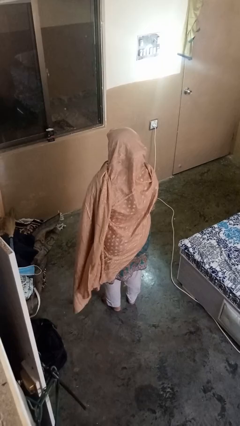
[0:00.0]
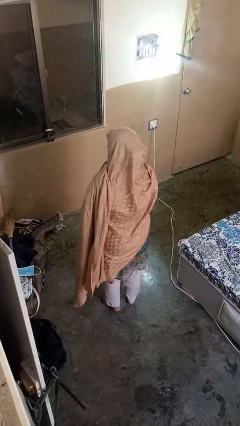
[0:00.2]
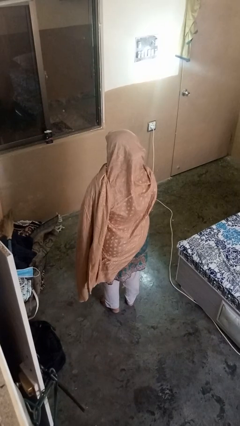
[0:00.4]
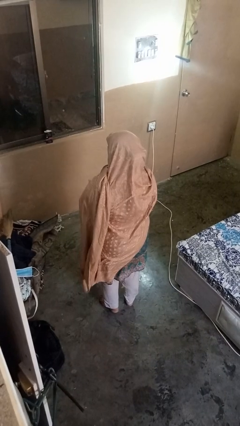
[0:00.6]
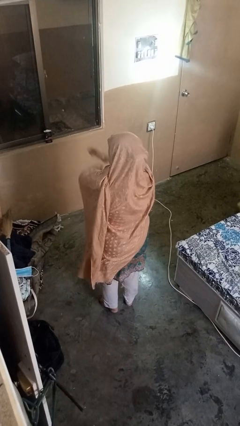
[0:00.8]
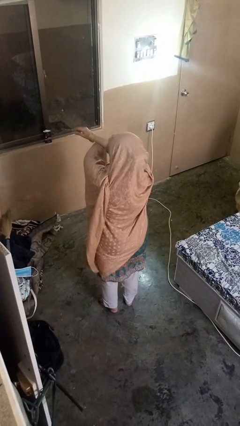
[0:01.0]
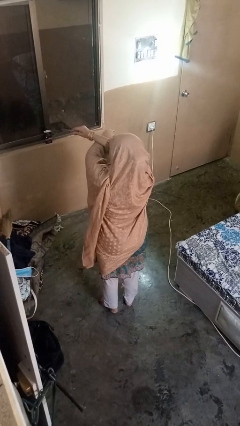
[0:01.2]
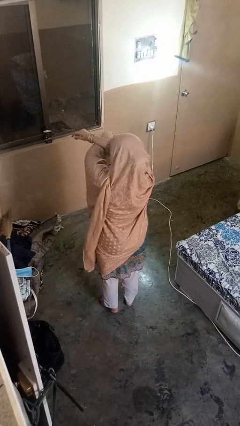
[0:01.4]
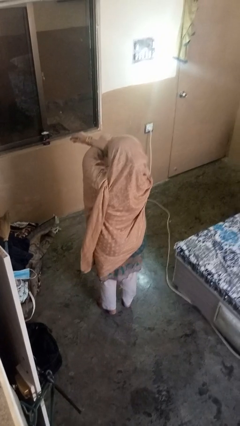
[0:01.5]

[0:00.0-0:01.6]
person crosses arms

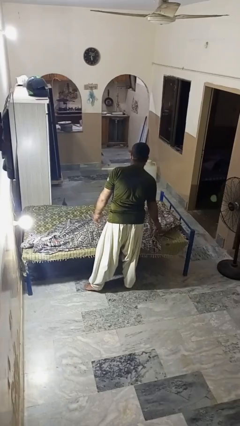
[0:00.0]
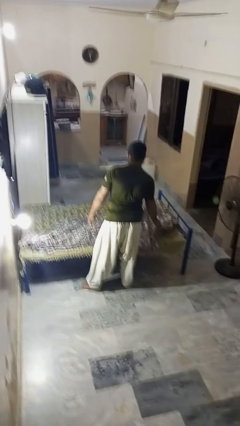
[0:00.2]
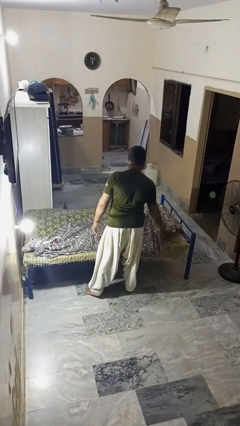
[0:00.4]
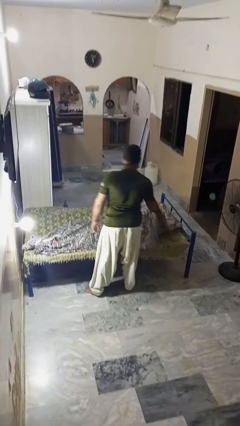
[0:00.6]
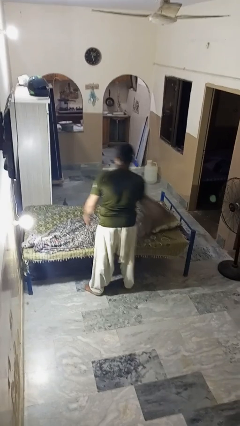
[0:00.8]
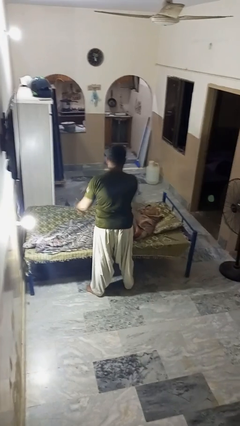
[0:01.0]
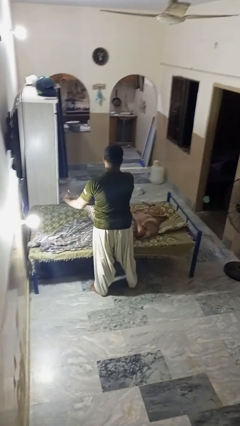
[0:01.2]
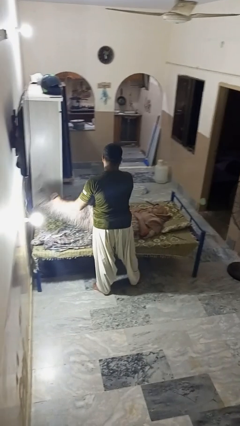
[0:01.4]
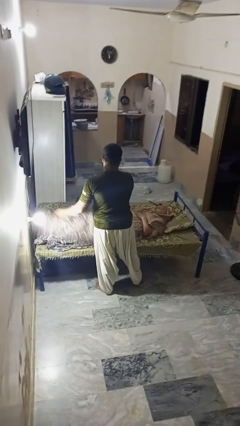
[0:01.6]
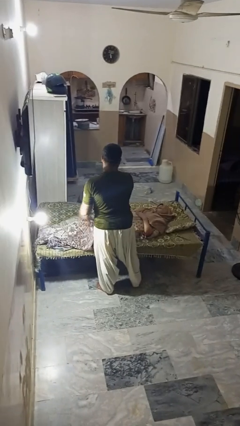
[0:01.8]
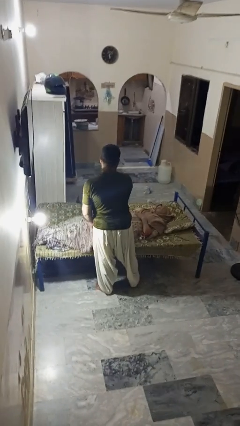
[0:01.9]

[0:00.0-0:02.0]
person uncovers friend with blanket

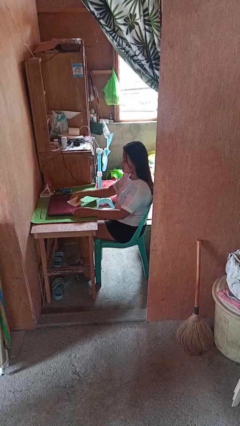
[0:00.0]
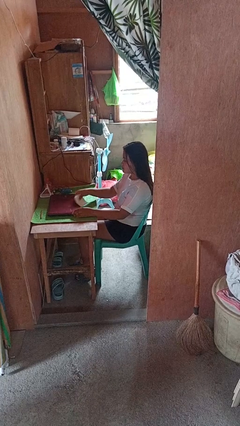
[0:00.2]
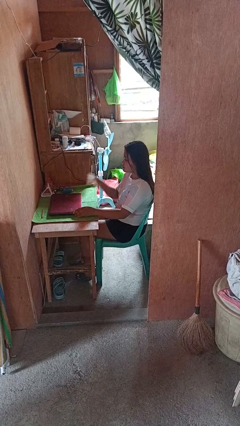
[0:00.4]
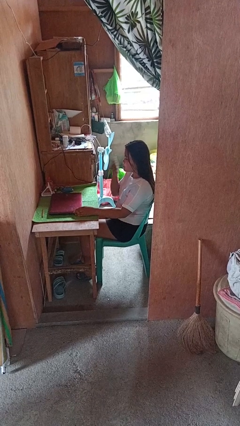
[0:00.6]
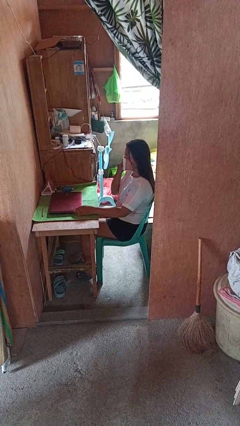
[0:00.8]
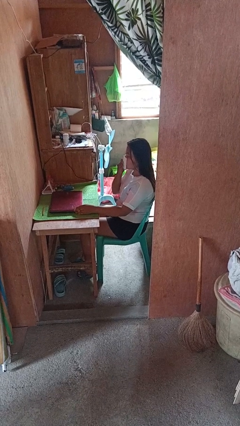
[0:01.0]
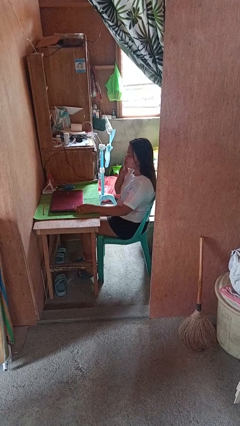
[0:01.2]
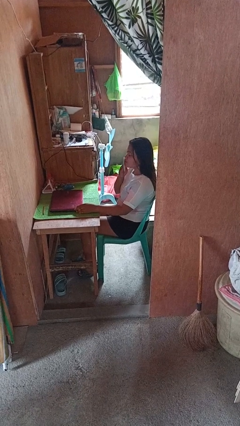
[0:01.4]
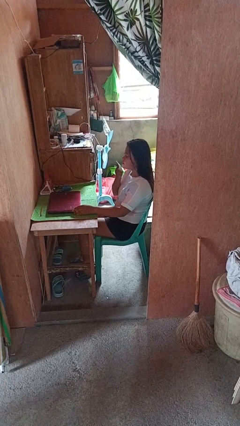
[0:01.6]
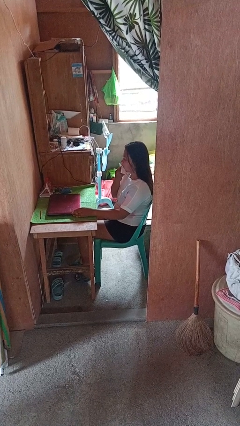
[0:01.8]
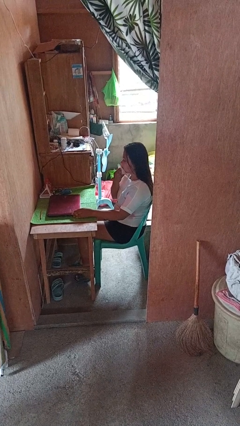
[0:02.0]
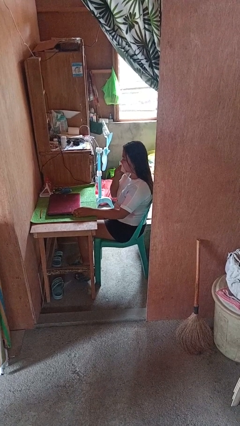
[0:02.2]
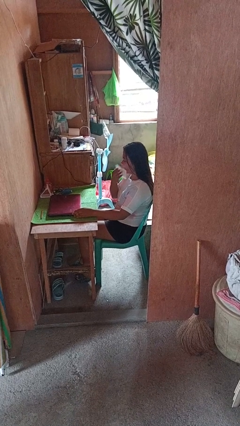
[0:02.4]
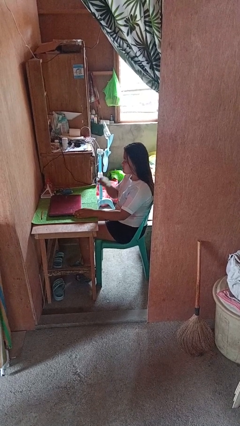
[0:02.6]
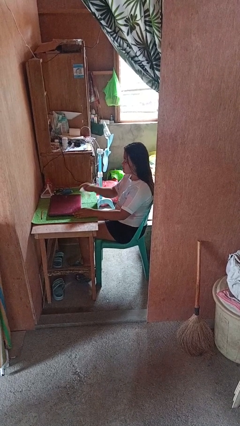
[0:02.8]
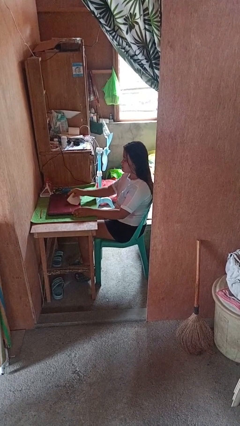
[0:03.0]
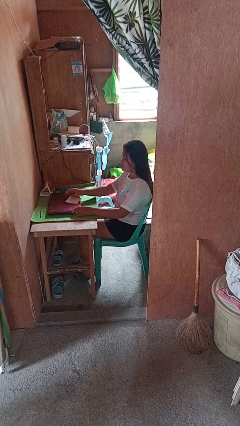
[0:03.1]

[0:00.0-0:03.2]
person wipes mouth with napkin

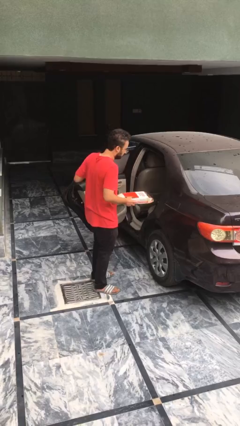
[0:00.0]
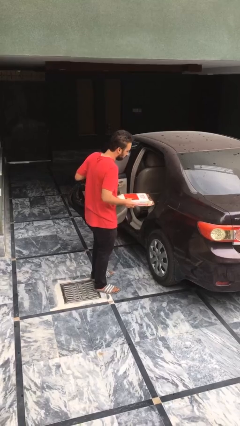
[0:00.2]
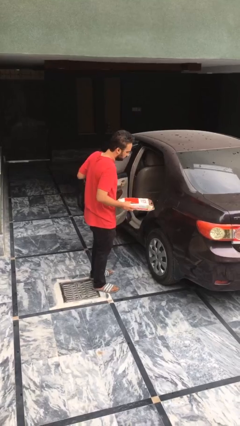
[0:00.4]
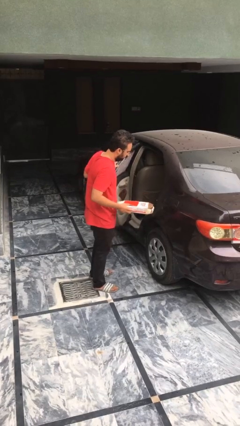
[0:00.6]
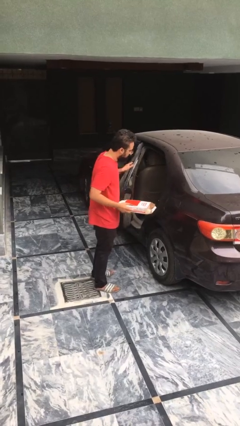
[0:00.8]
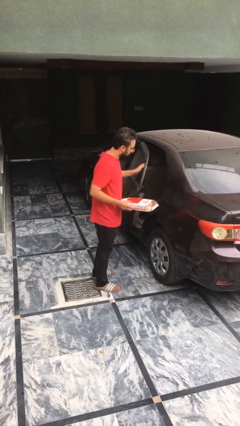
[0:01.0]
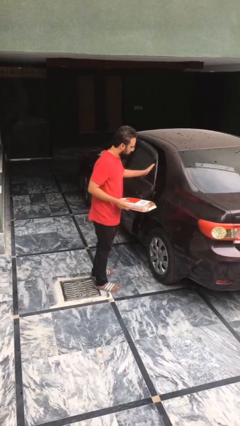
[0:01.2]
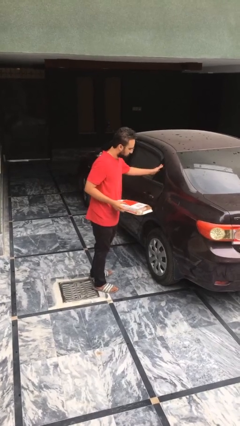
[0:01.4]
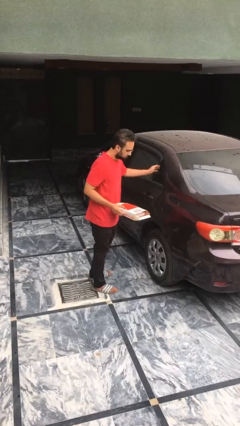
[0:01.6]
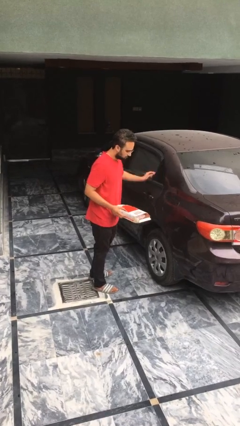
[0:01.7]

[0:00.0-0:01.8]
person closes car door

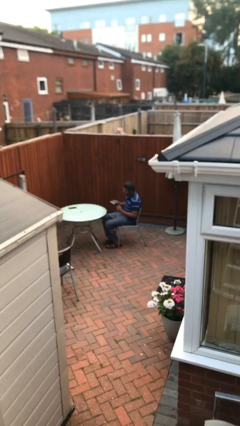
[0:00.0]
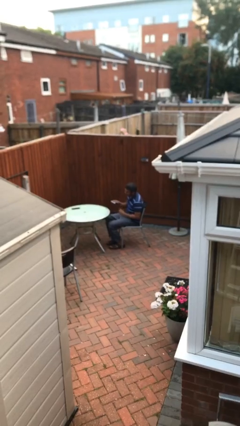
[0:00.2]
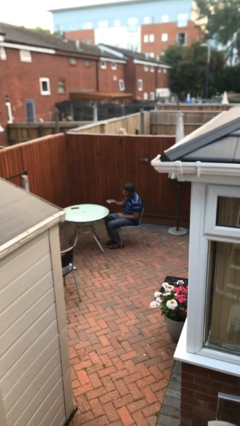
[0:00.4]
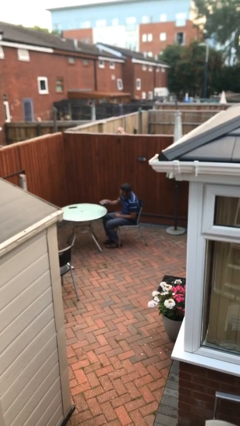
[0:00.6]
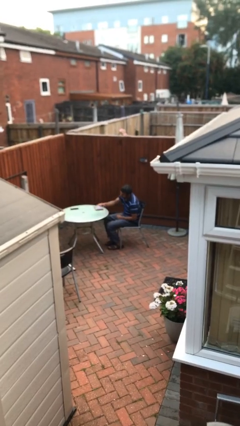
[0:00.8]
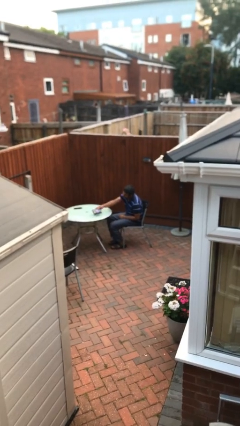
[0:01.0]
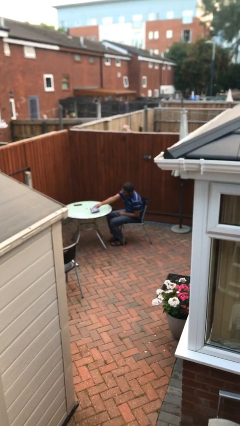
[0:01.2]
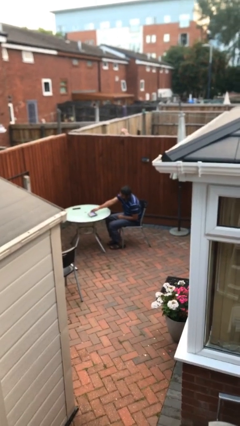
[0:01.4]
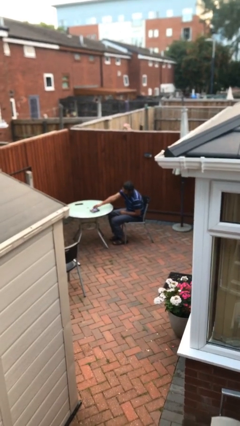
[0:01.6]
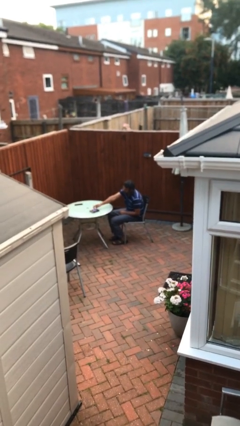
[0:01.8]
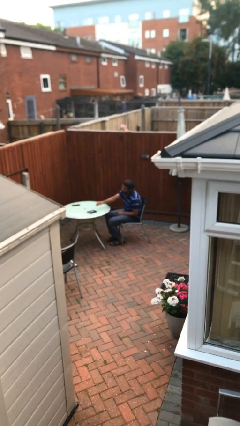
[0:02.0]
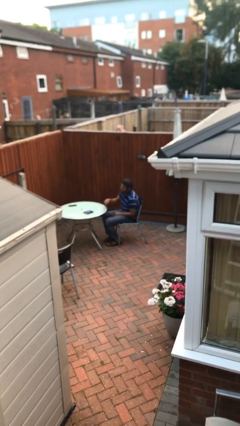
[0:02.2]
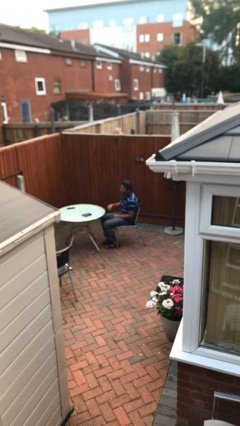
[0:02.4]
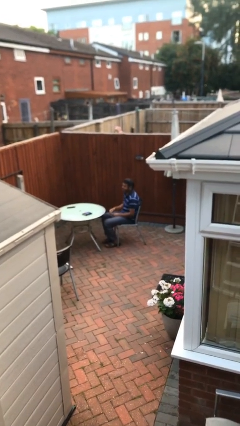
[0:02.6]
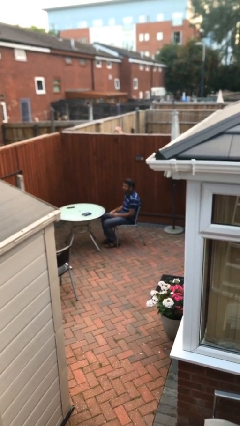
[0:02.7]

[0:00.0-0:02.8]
person puts down object on table

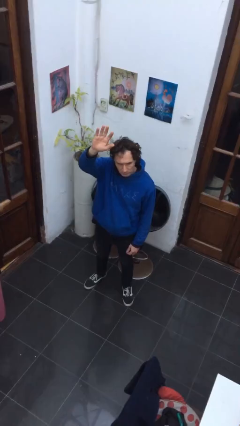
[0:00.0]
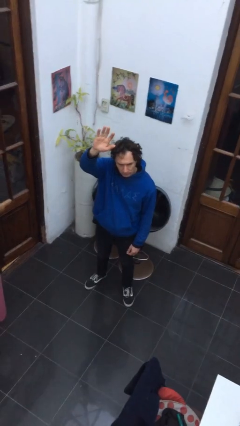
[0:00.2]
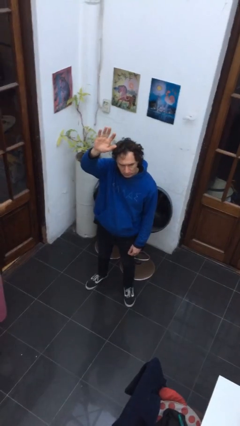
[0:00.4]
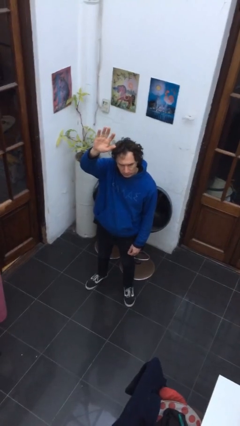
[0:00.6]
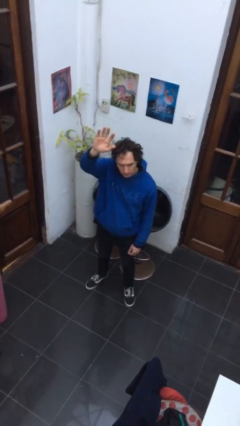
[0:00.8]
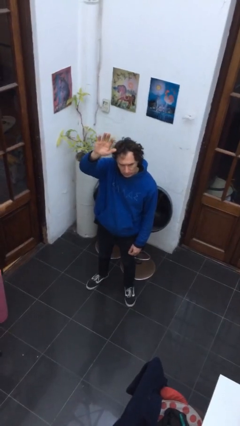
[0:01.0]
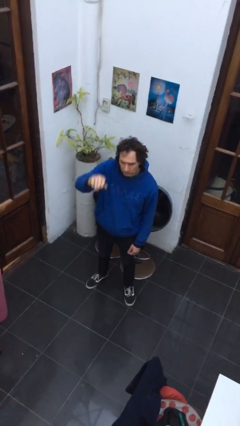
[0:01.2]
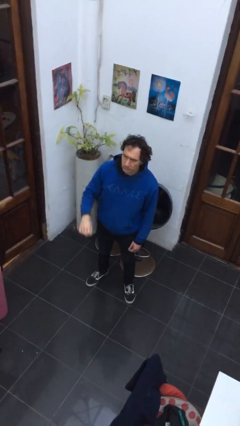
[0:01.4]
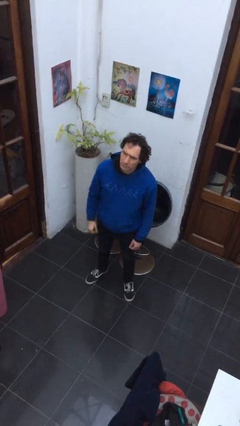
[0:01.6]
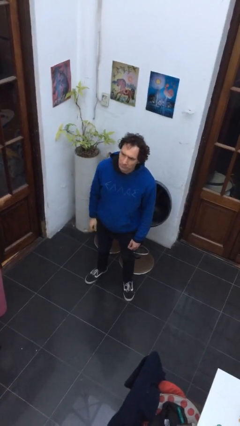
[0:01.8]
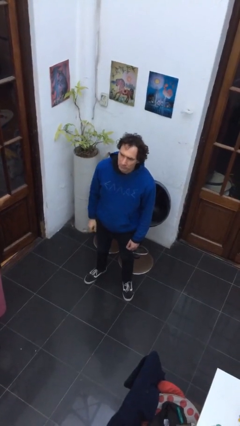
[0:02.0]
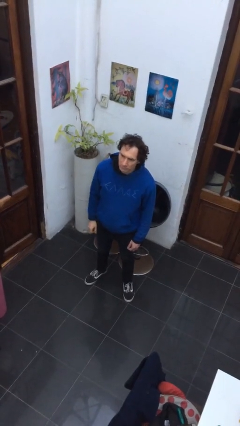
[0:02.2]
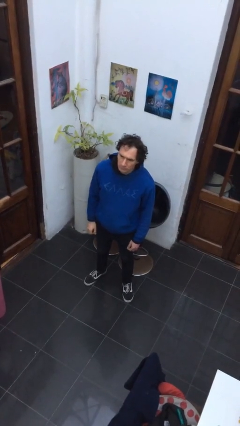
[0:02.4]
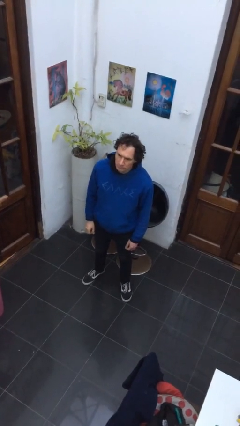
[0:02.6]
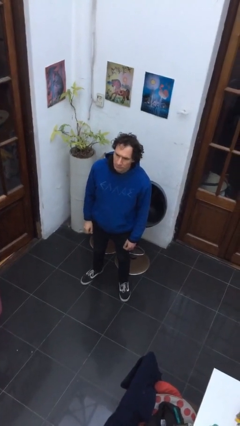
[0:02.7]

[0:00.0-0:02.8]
person gestures lower hand

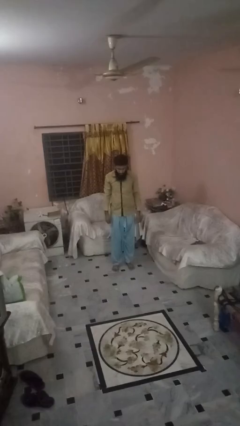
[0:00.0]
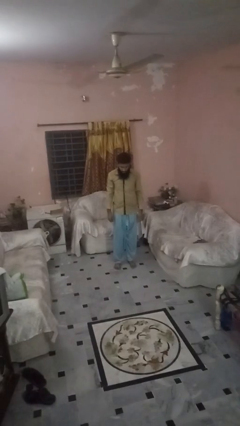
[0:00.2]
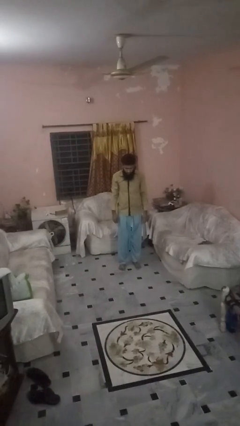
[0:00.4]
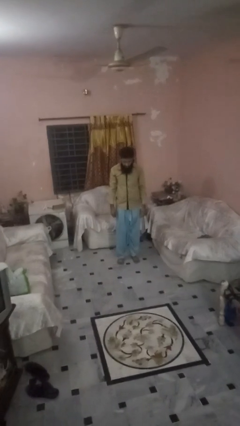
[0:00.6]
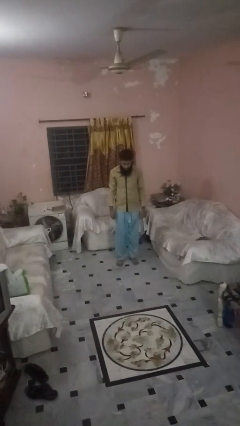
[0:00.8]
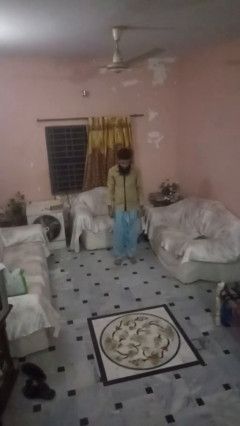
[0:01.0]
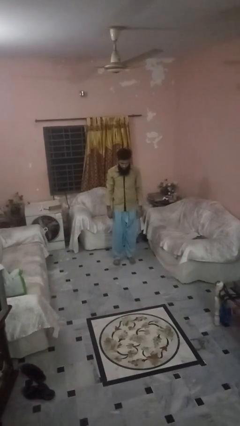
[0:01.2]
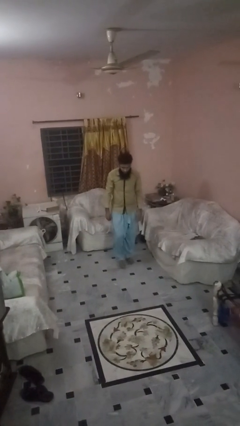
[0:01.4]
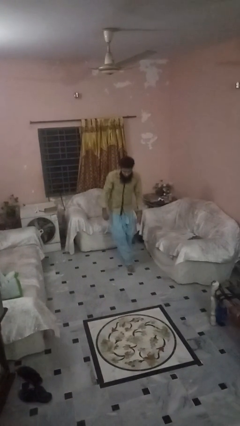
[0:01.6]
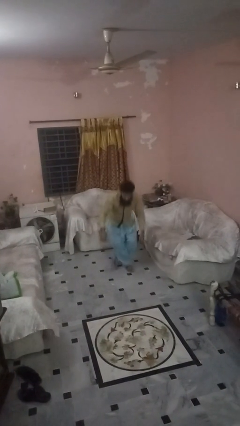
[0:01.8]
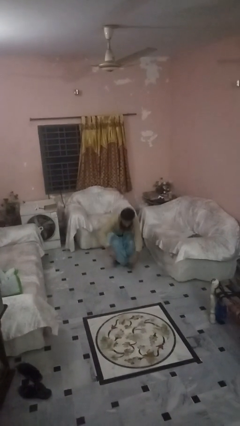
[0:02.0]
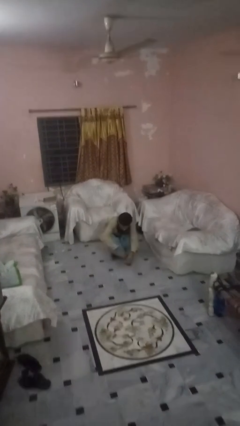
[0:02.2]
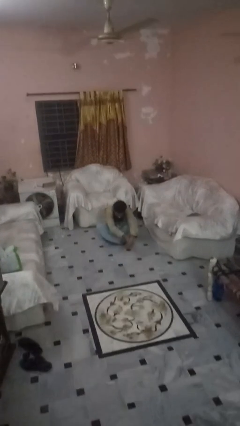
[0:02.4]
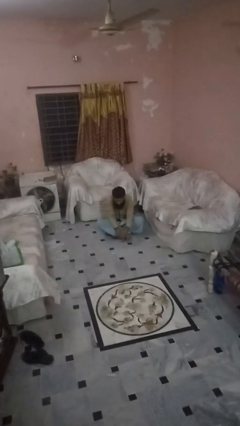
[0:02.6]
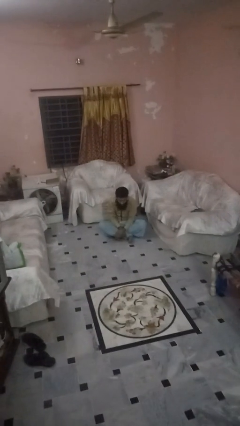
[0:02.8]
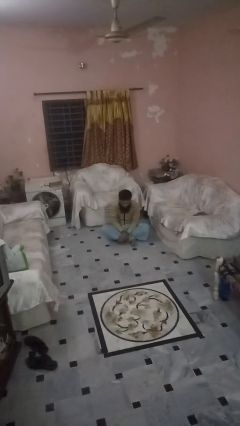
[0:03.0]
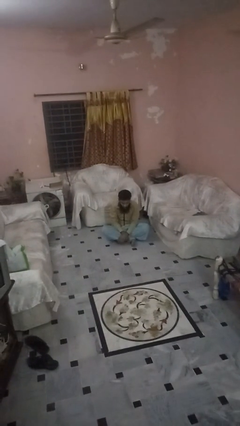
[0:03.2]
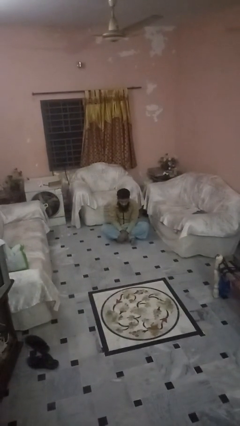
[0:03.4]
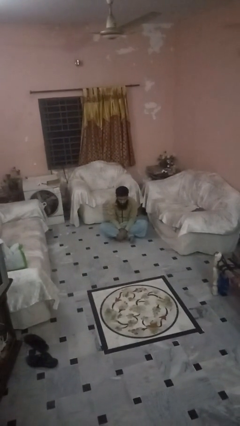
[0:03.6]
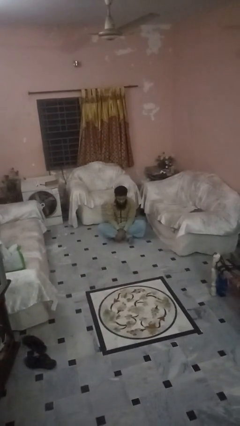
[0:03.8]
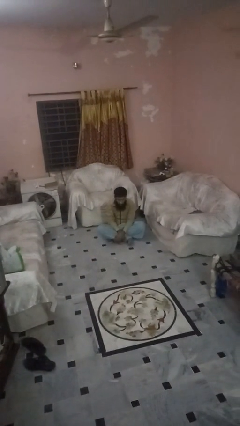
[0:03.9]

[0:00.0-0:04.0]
person sits crisscross
